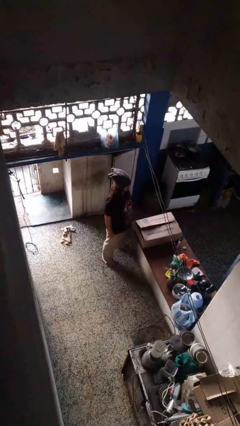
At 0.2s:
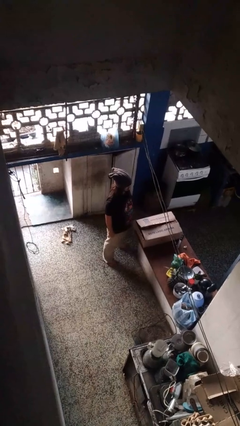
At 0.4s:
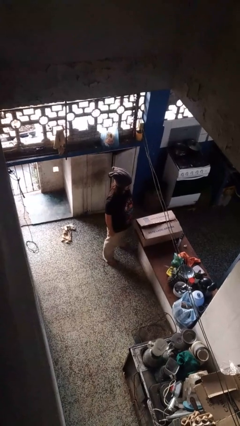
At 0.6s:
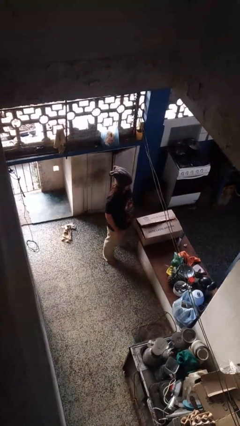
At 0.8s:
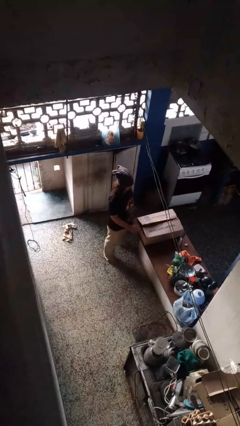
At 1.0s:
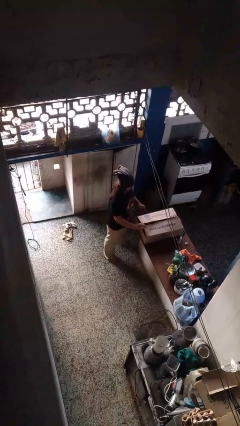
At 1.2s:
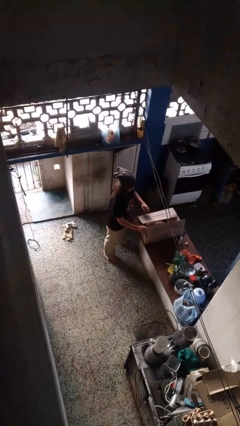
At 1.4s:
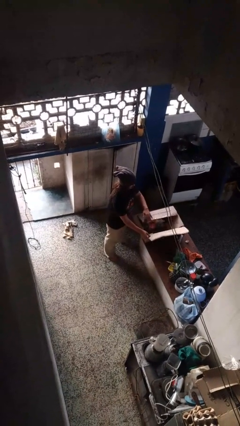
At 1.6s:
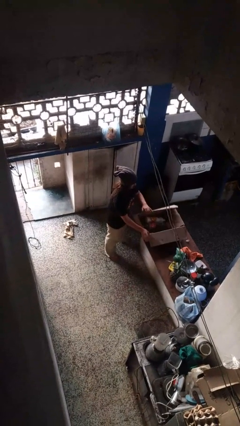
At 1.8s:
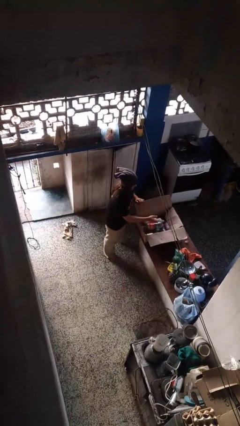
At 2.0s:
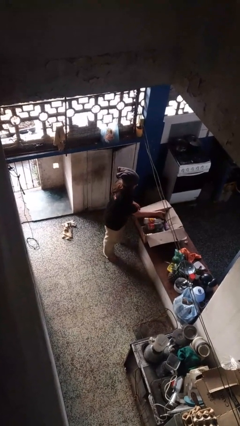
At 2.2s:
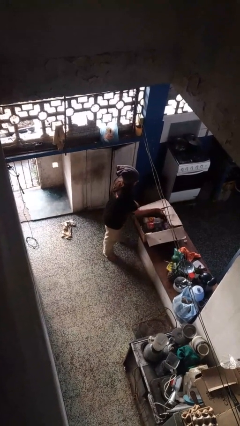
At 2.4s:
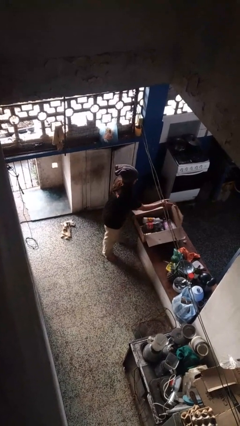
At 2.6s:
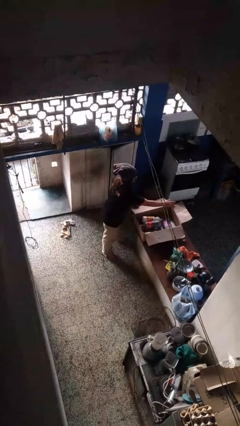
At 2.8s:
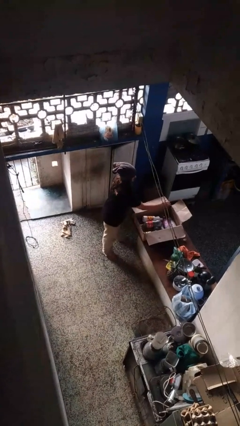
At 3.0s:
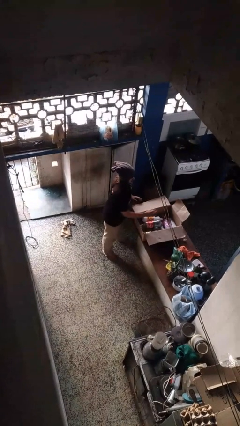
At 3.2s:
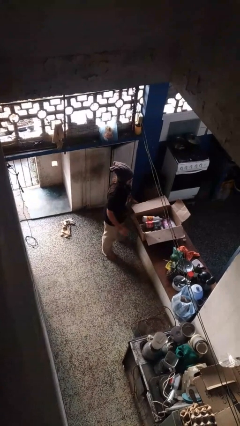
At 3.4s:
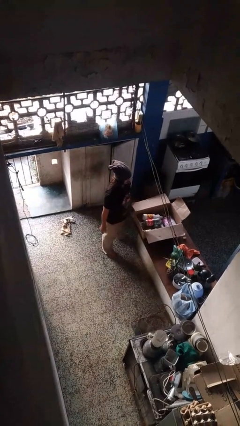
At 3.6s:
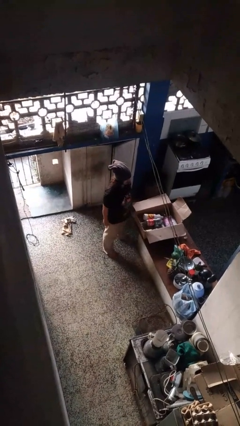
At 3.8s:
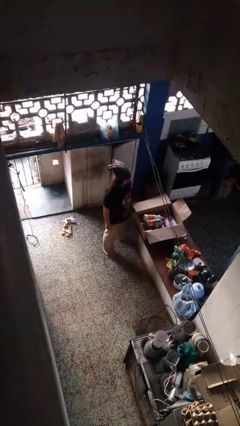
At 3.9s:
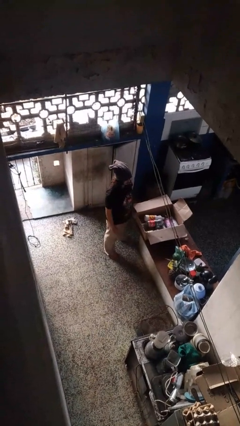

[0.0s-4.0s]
person opens box

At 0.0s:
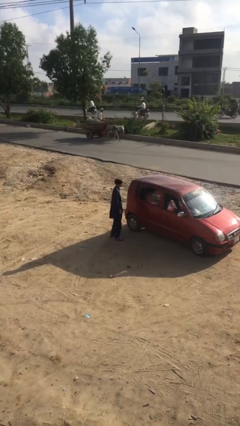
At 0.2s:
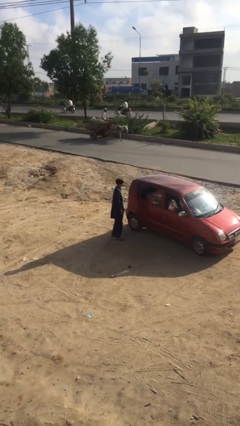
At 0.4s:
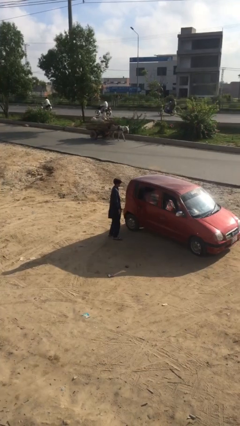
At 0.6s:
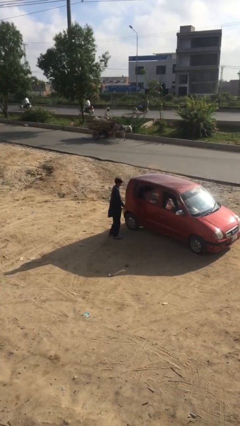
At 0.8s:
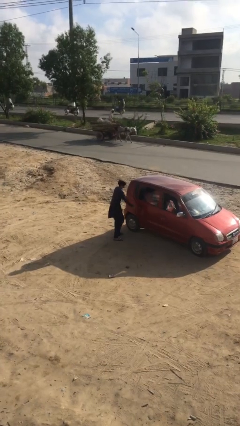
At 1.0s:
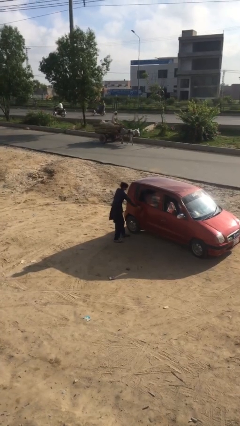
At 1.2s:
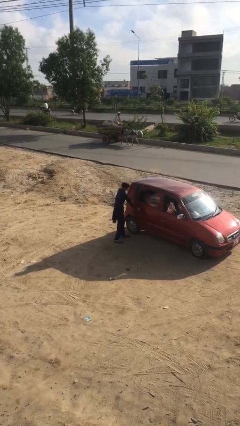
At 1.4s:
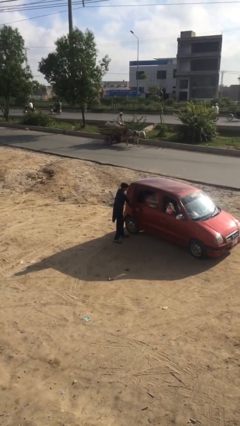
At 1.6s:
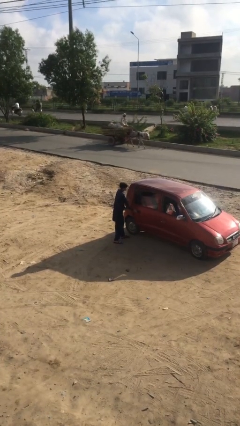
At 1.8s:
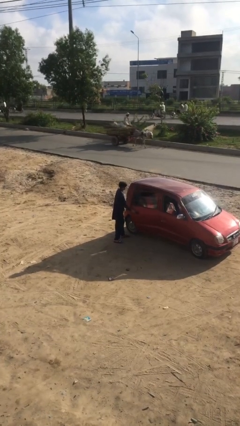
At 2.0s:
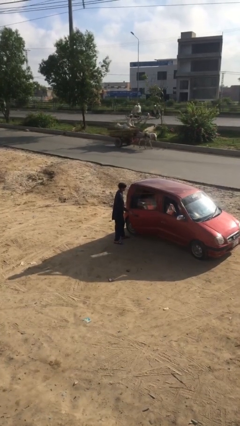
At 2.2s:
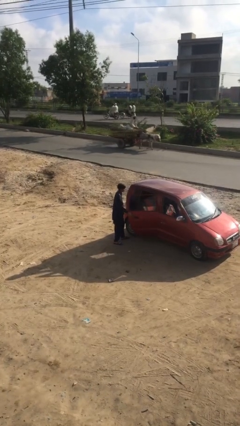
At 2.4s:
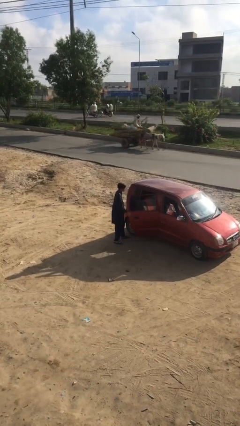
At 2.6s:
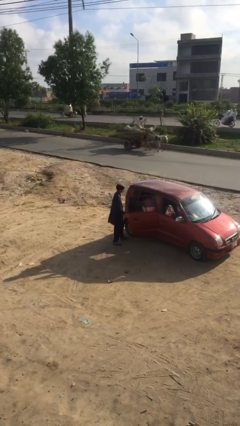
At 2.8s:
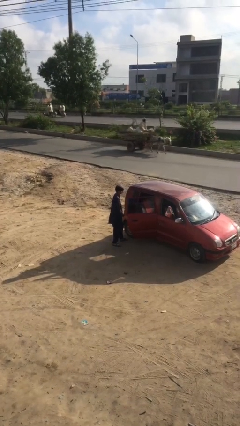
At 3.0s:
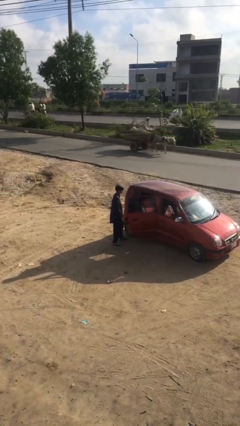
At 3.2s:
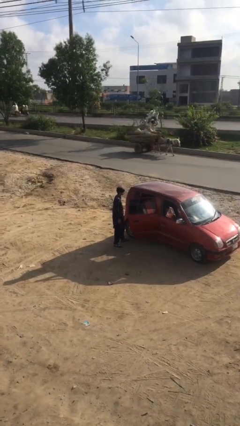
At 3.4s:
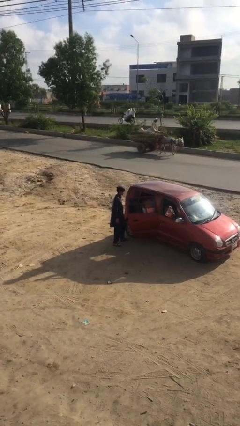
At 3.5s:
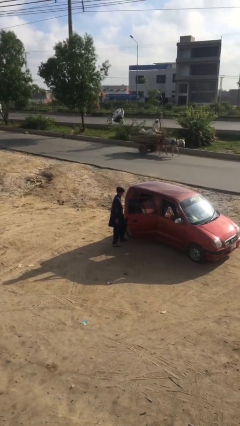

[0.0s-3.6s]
person opens car door

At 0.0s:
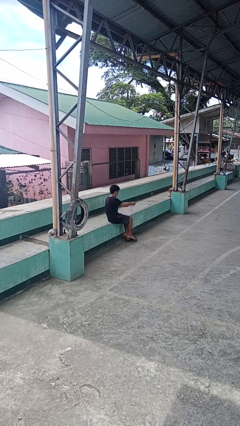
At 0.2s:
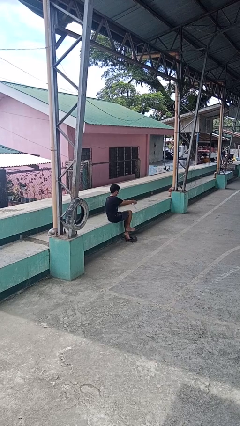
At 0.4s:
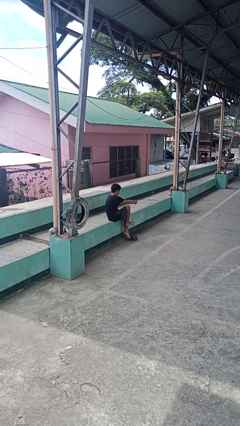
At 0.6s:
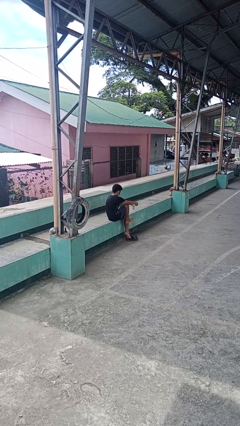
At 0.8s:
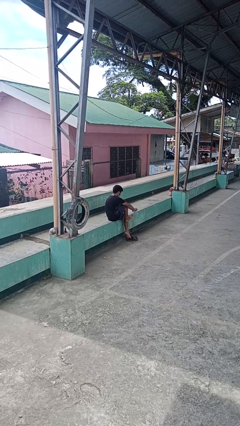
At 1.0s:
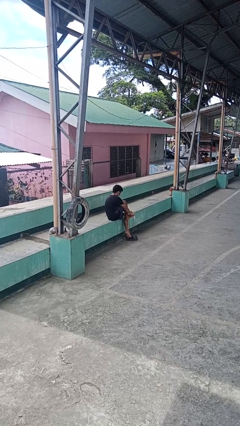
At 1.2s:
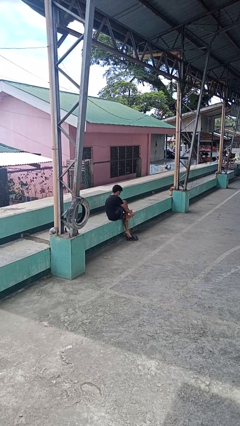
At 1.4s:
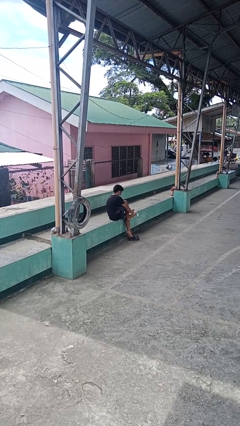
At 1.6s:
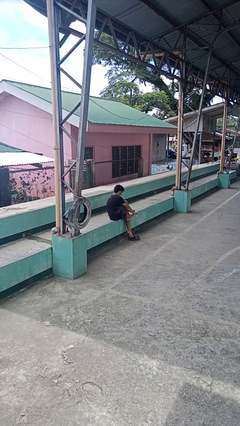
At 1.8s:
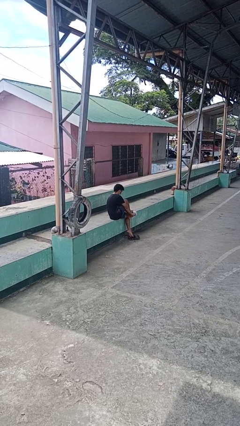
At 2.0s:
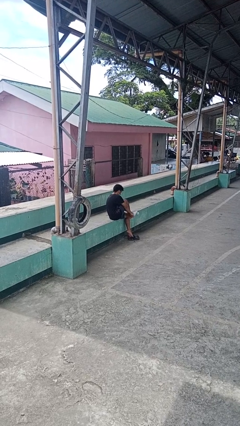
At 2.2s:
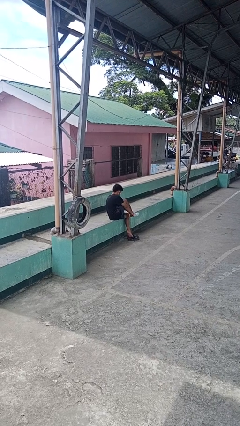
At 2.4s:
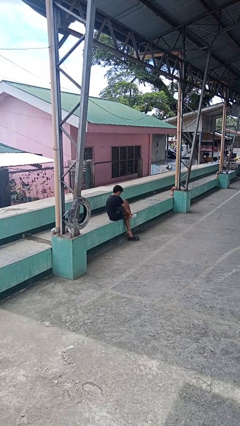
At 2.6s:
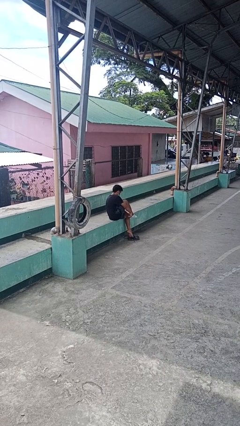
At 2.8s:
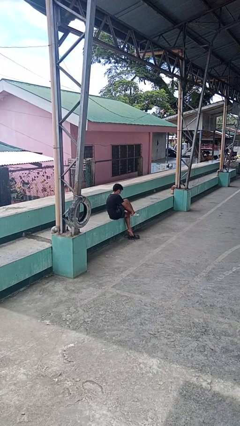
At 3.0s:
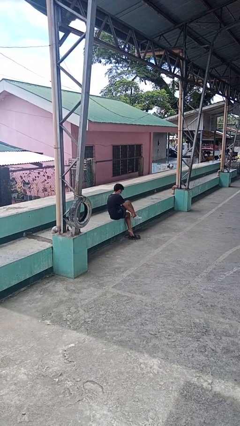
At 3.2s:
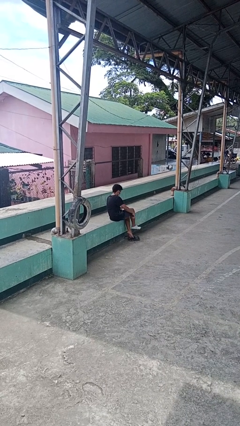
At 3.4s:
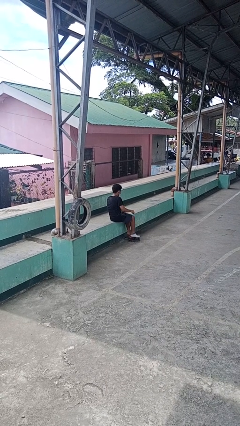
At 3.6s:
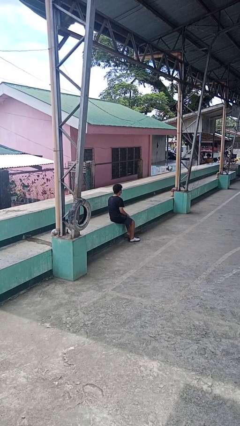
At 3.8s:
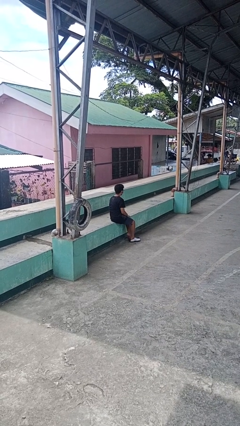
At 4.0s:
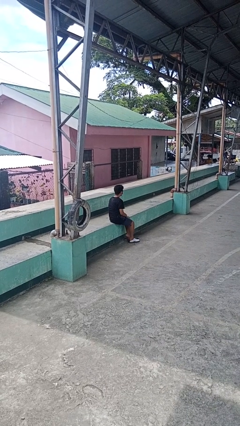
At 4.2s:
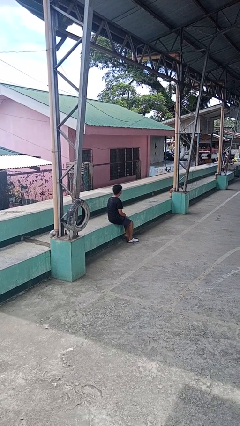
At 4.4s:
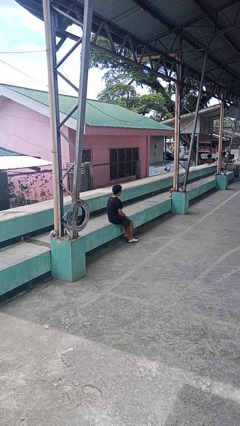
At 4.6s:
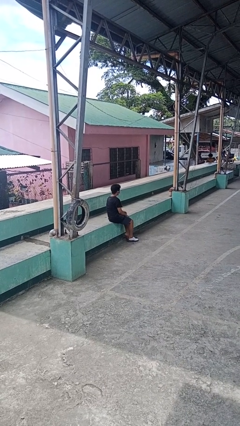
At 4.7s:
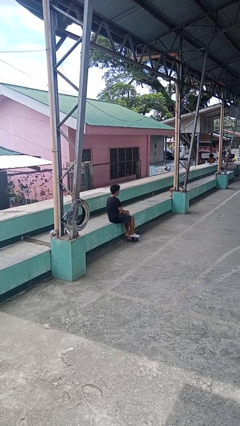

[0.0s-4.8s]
person puts on socks

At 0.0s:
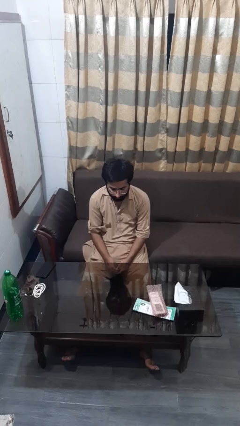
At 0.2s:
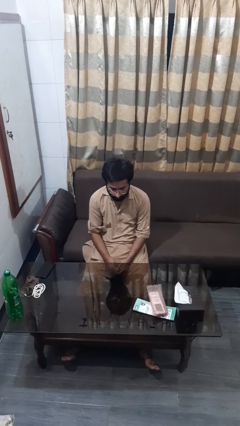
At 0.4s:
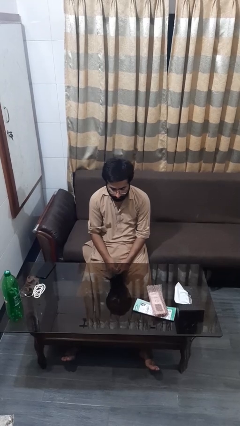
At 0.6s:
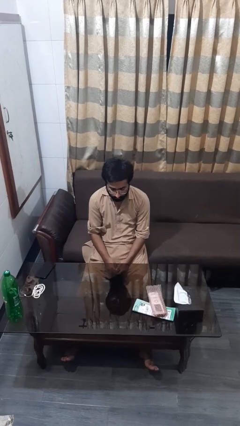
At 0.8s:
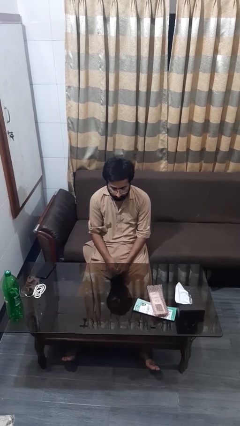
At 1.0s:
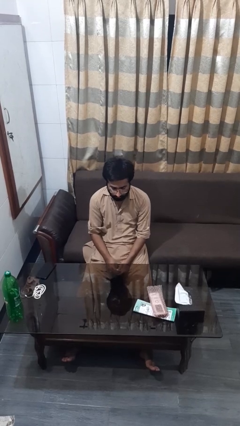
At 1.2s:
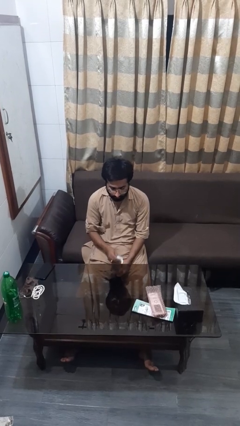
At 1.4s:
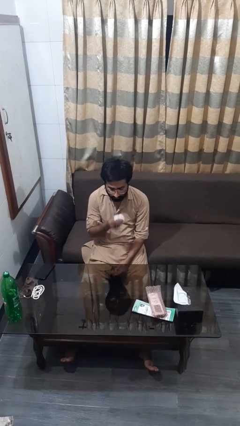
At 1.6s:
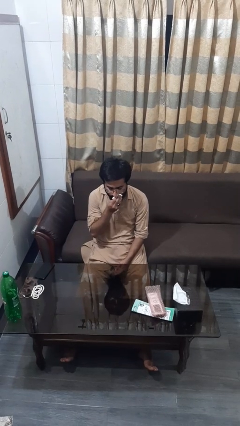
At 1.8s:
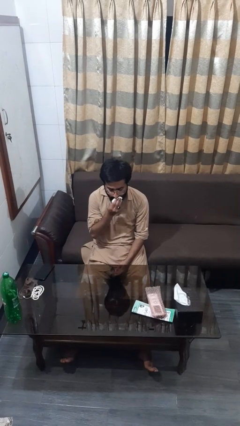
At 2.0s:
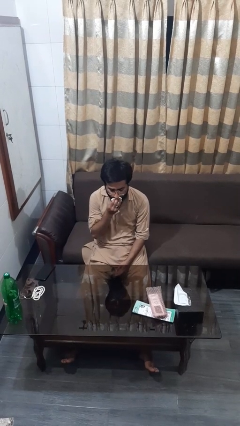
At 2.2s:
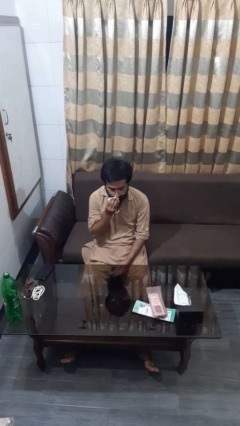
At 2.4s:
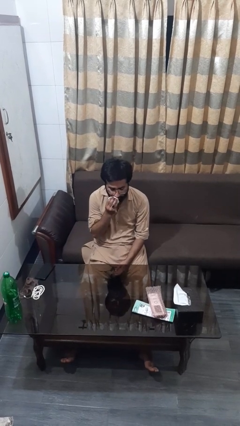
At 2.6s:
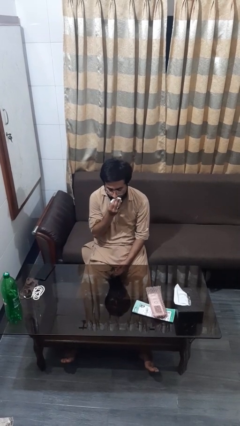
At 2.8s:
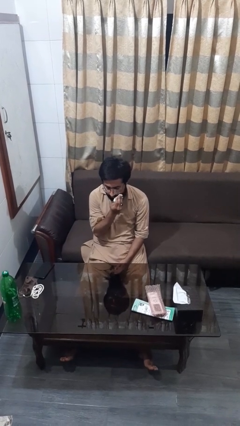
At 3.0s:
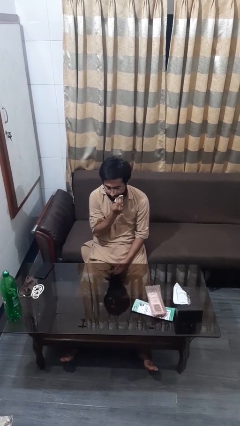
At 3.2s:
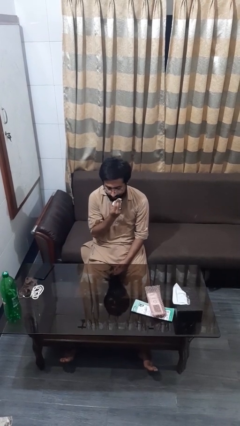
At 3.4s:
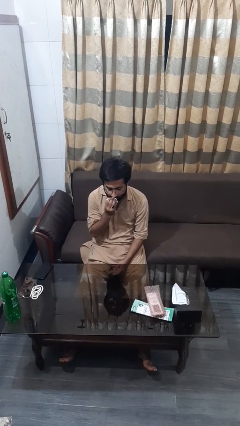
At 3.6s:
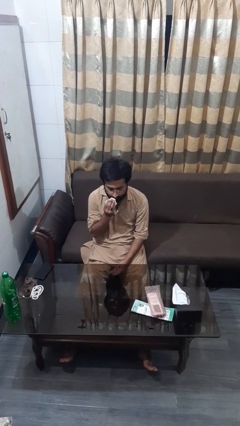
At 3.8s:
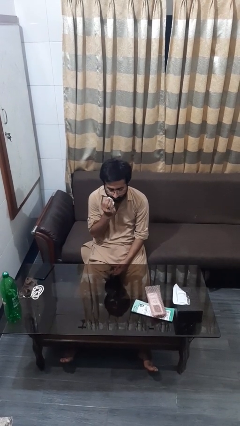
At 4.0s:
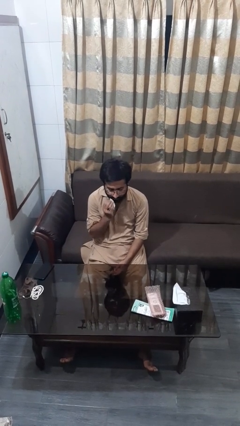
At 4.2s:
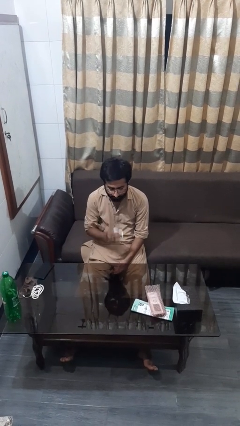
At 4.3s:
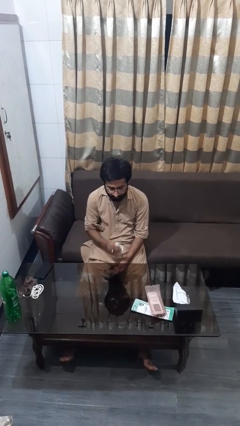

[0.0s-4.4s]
person wipes mouth with napkin

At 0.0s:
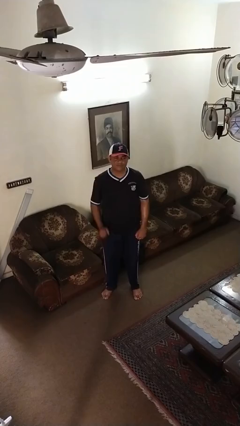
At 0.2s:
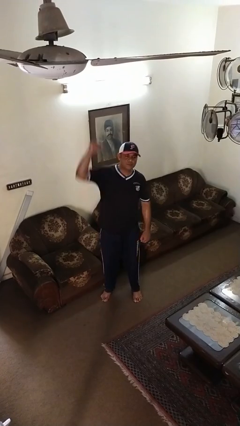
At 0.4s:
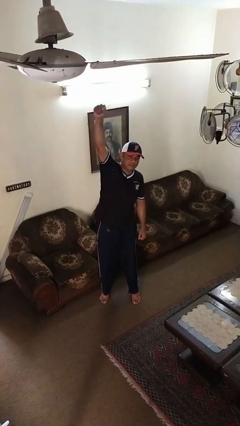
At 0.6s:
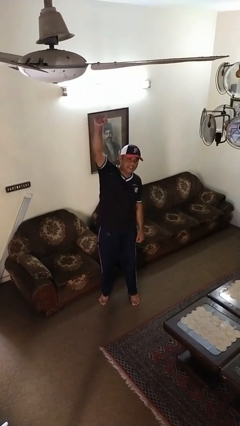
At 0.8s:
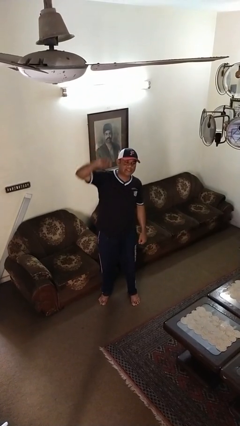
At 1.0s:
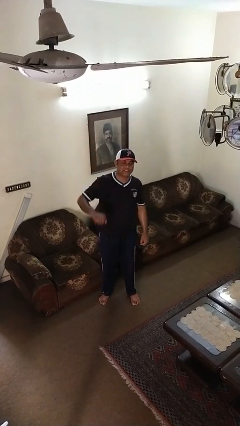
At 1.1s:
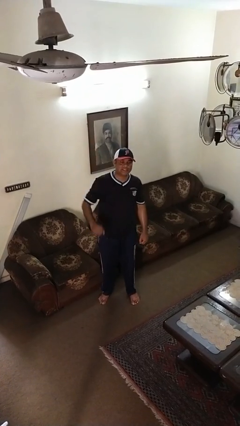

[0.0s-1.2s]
person punches
